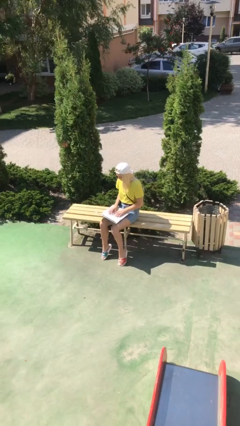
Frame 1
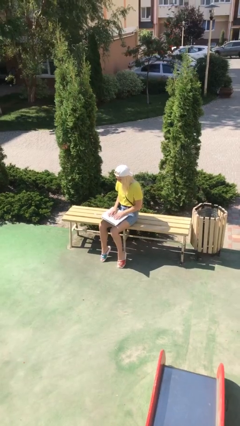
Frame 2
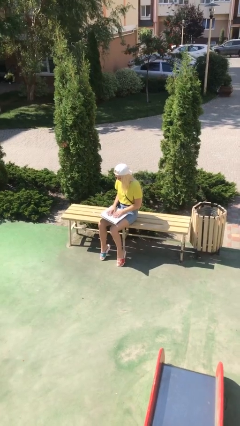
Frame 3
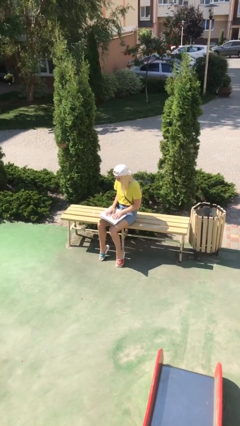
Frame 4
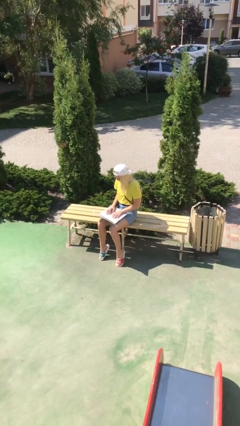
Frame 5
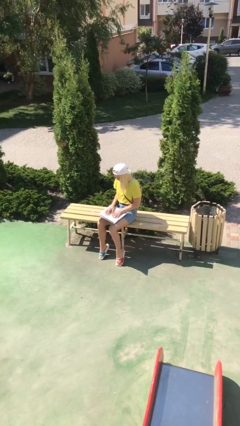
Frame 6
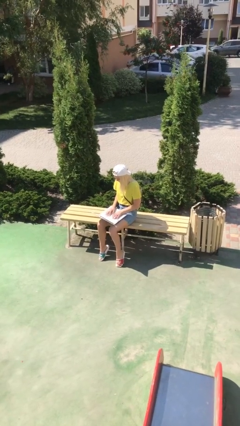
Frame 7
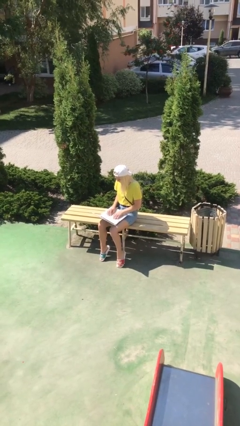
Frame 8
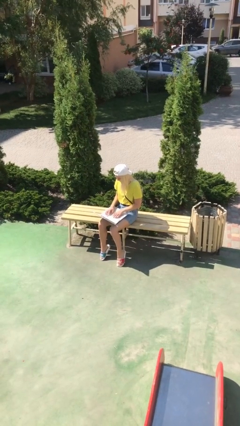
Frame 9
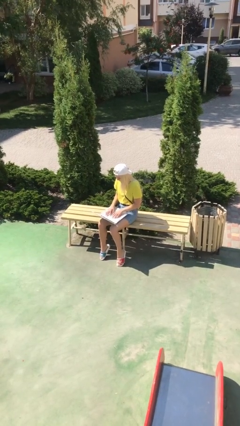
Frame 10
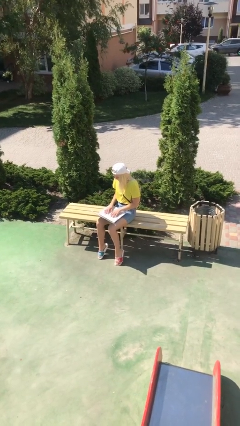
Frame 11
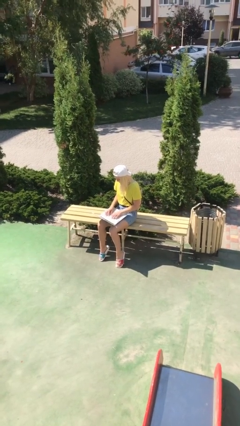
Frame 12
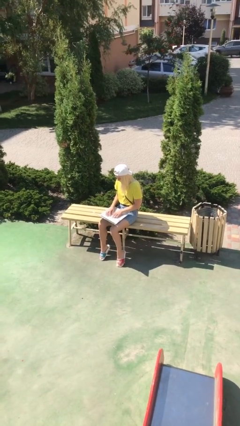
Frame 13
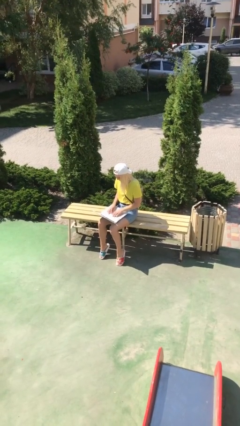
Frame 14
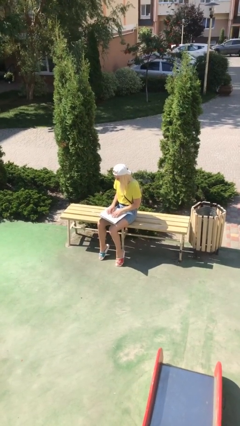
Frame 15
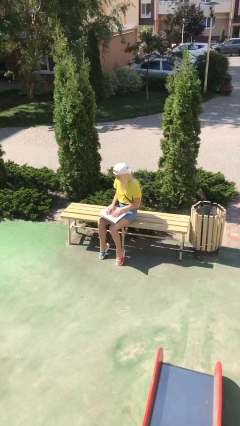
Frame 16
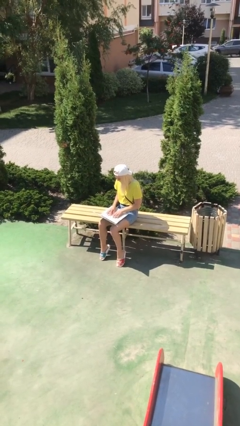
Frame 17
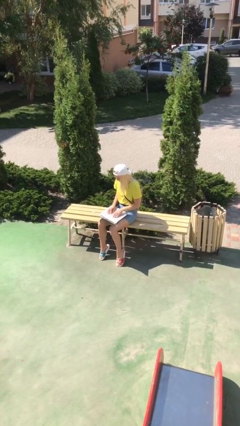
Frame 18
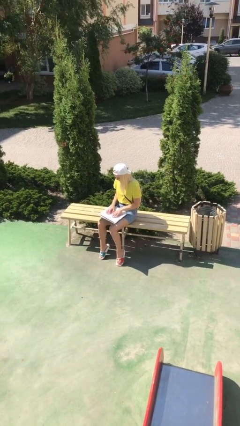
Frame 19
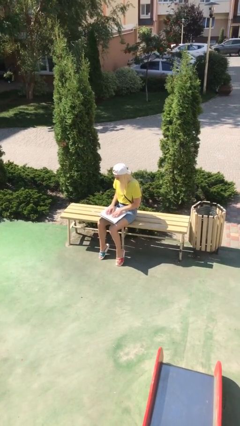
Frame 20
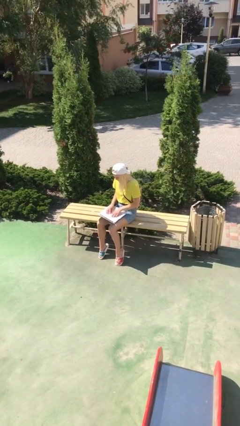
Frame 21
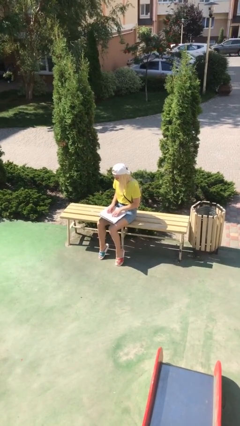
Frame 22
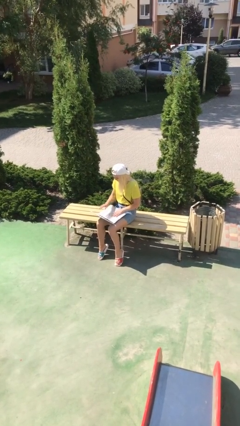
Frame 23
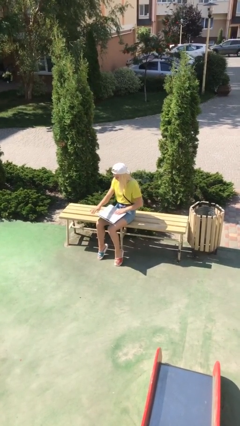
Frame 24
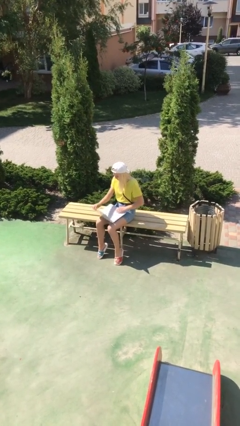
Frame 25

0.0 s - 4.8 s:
person interacts with laptop

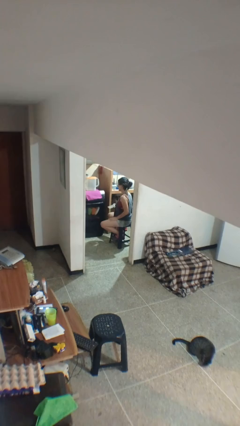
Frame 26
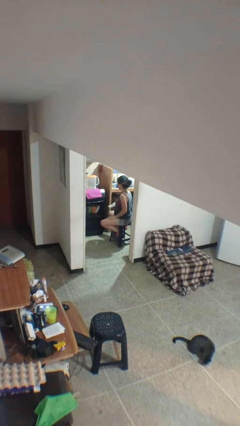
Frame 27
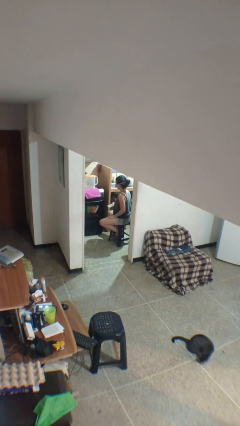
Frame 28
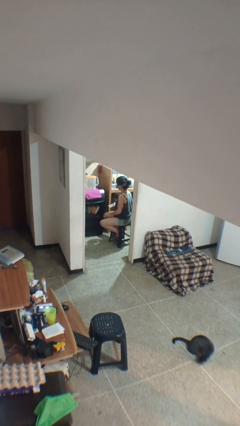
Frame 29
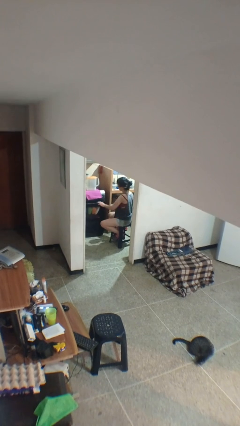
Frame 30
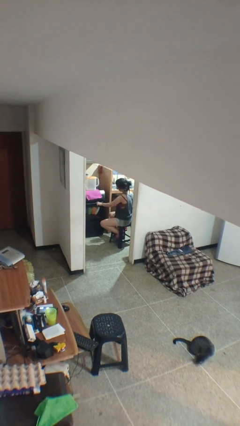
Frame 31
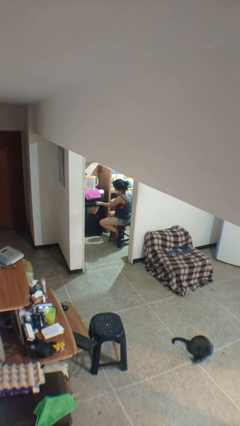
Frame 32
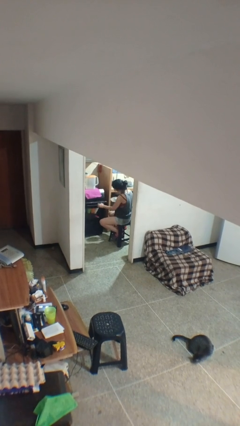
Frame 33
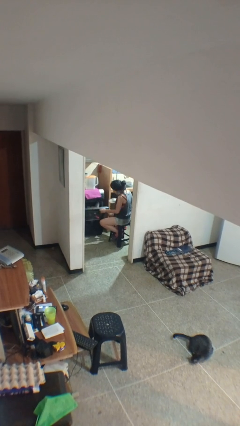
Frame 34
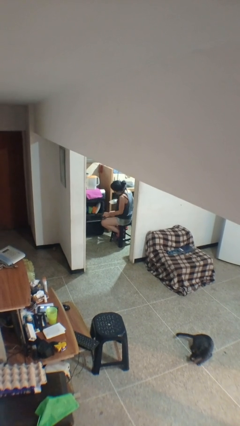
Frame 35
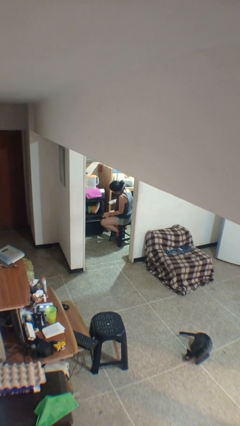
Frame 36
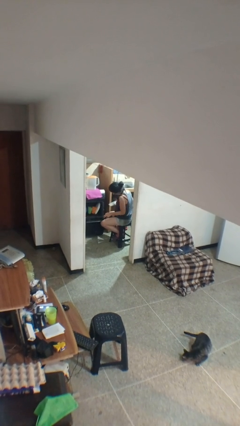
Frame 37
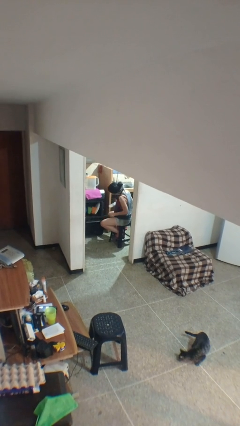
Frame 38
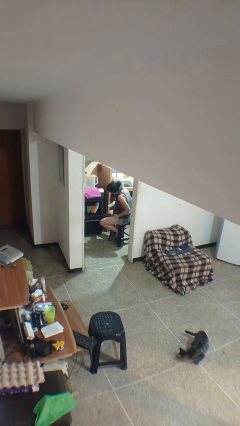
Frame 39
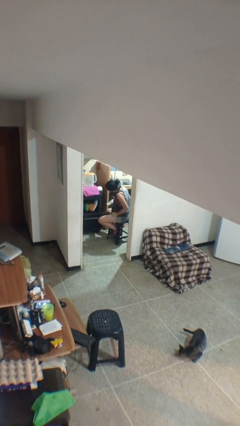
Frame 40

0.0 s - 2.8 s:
person opens dishwasher

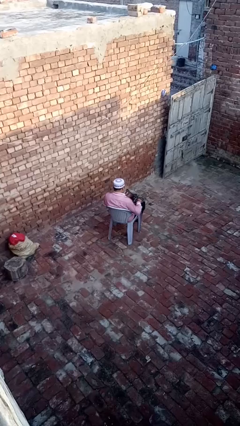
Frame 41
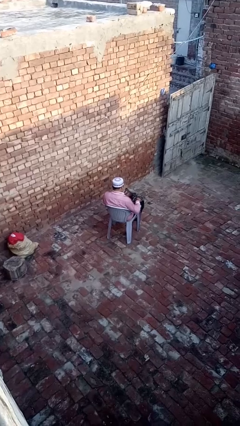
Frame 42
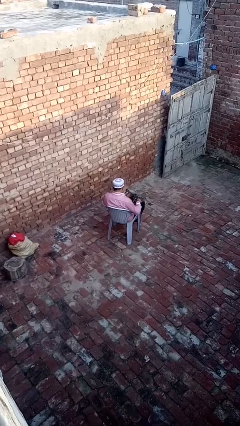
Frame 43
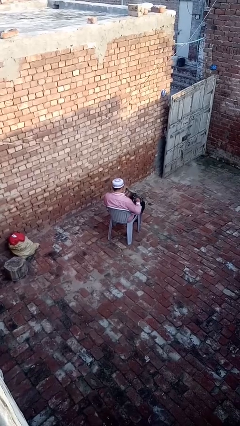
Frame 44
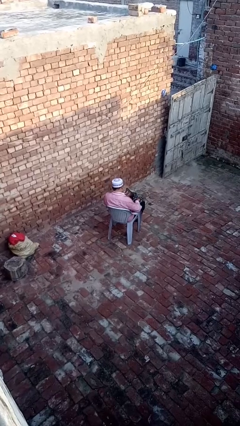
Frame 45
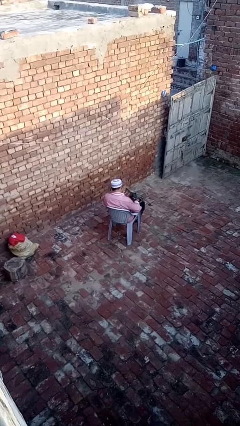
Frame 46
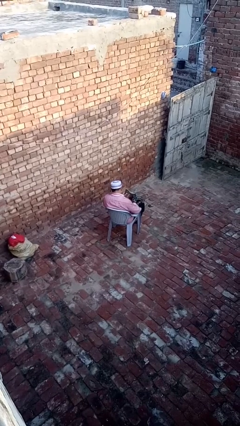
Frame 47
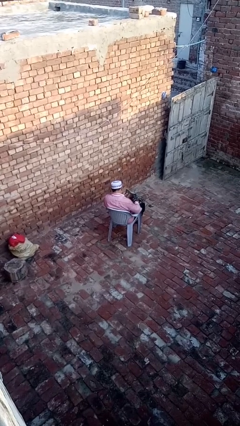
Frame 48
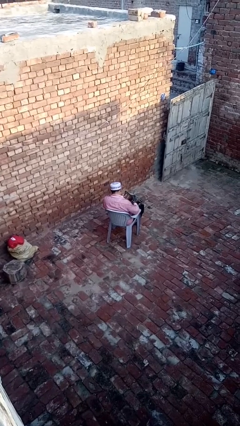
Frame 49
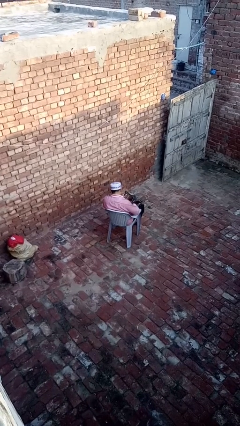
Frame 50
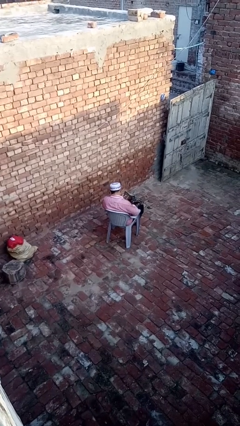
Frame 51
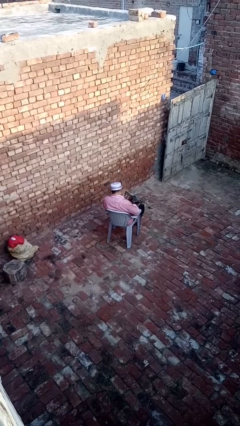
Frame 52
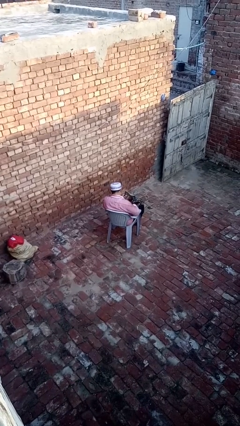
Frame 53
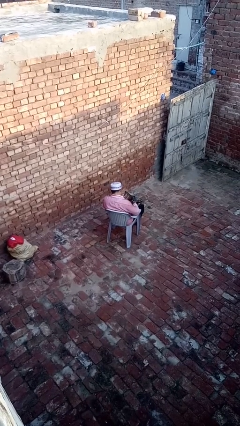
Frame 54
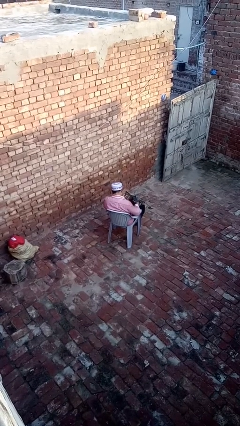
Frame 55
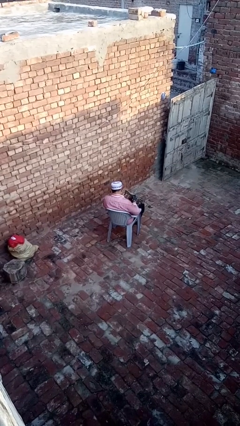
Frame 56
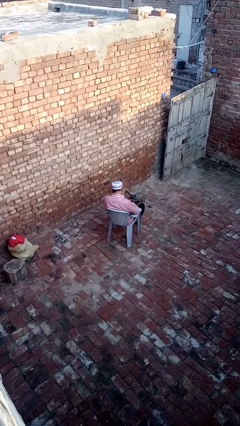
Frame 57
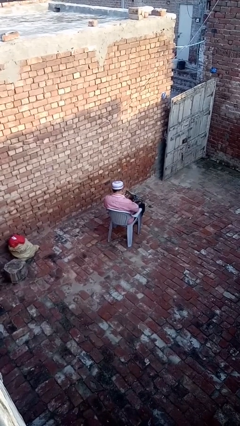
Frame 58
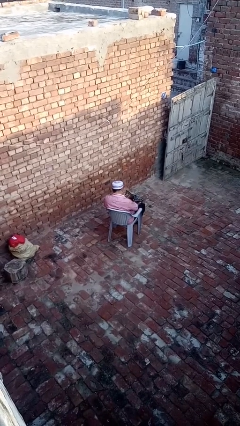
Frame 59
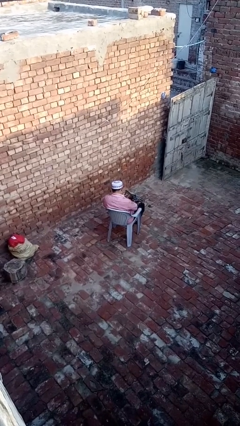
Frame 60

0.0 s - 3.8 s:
person searches in purse

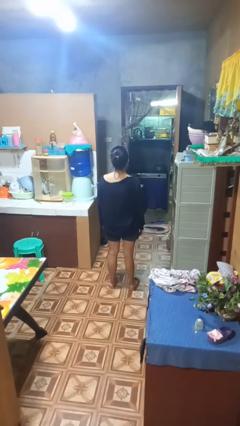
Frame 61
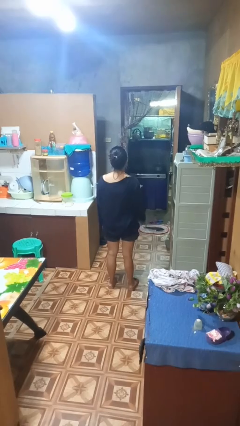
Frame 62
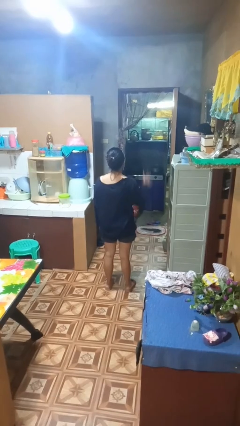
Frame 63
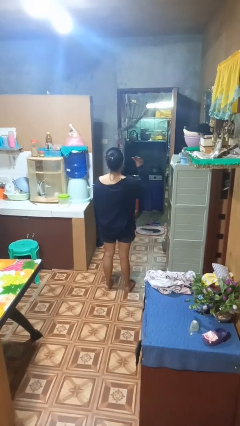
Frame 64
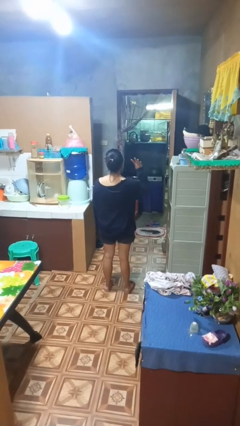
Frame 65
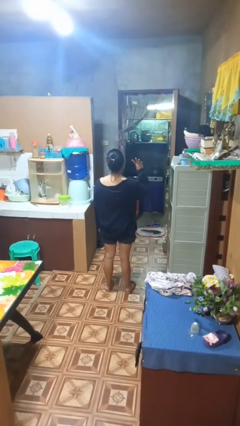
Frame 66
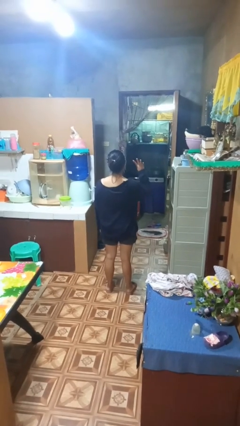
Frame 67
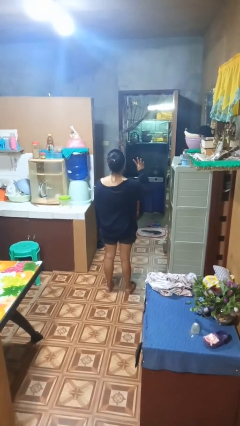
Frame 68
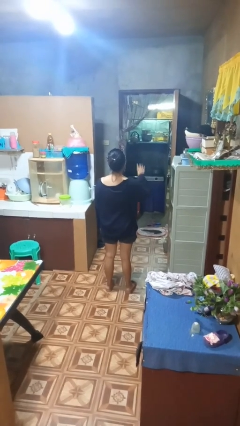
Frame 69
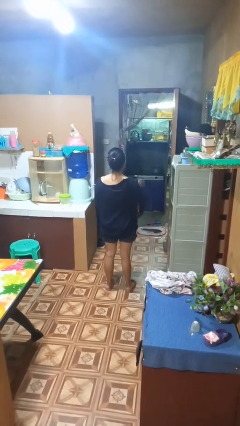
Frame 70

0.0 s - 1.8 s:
person gestures number four

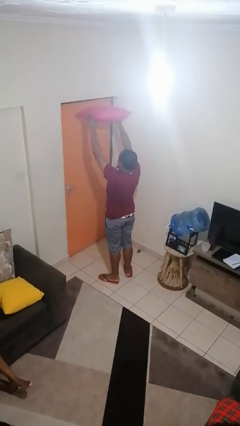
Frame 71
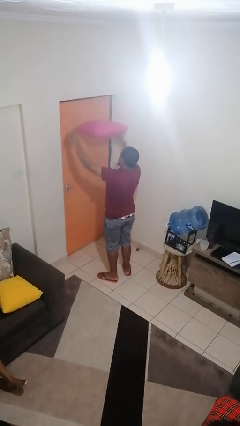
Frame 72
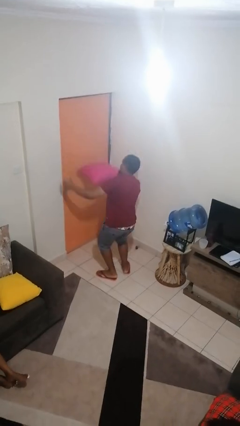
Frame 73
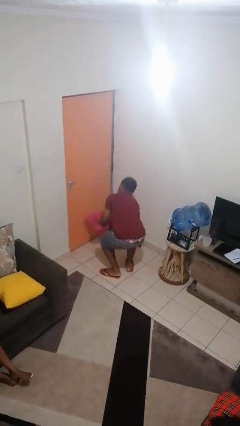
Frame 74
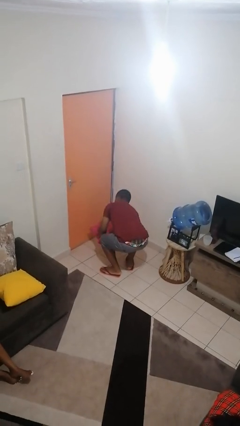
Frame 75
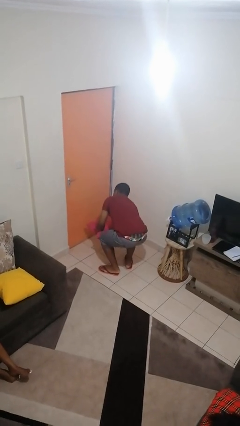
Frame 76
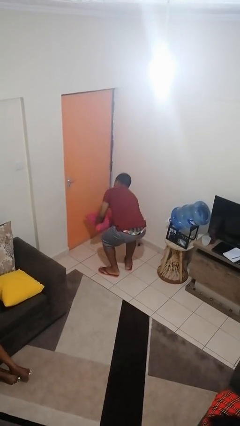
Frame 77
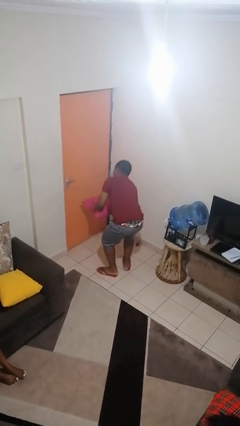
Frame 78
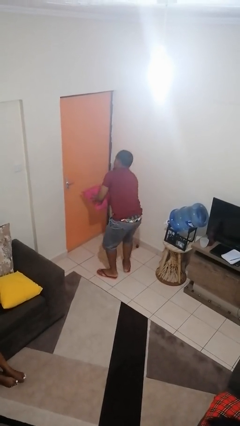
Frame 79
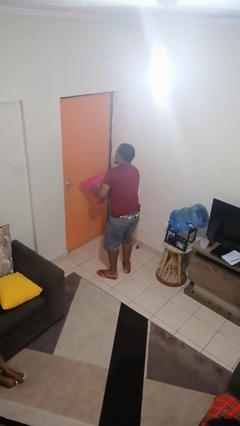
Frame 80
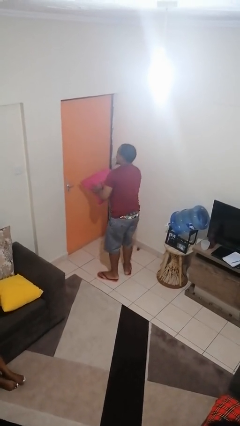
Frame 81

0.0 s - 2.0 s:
person catches dropped object

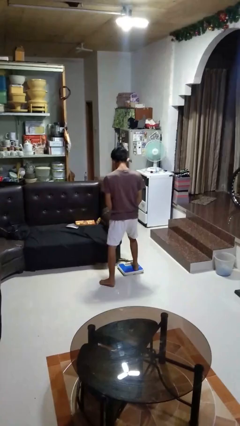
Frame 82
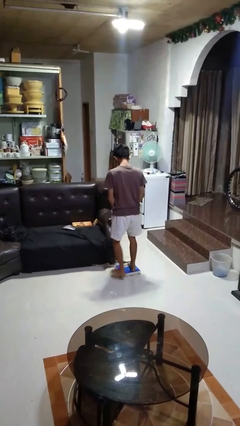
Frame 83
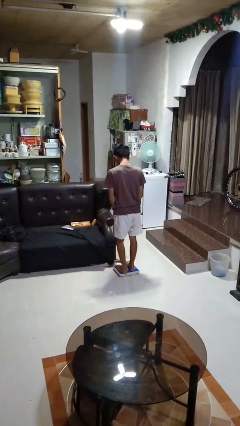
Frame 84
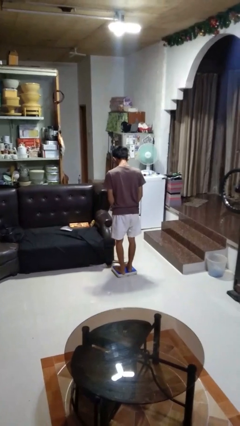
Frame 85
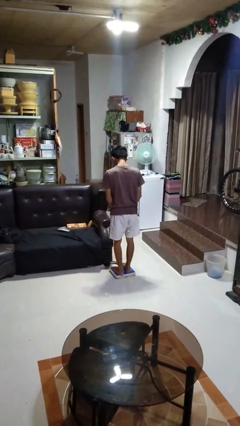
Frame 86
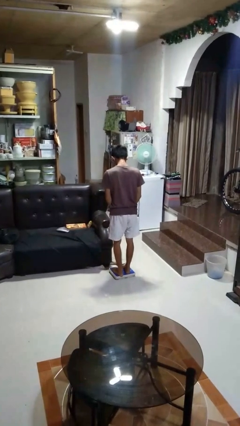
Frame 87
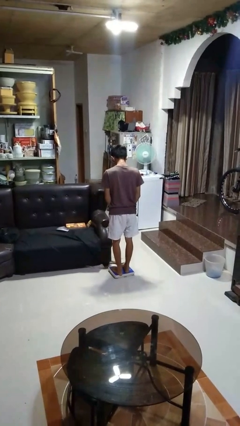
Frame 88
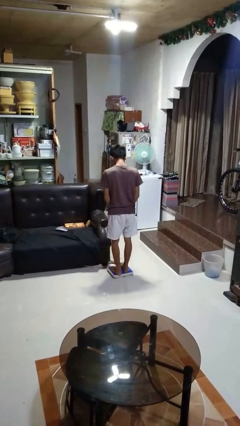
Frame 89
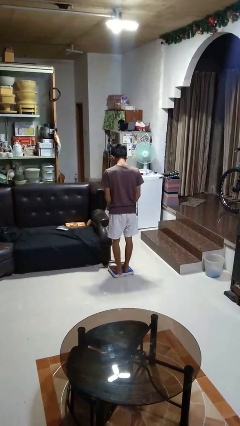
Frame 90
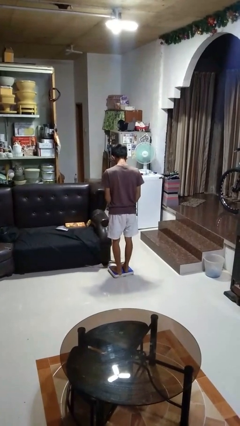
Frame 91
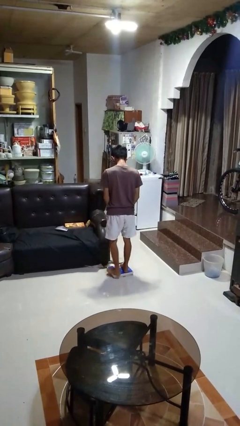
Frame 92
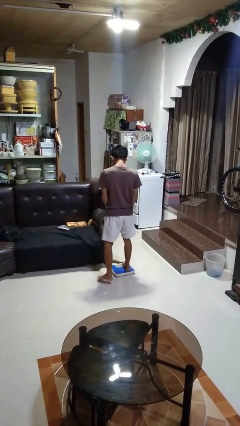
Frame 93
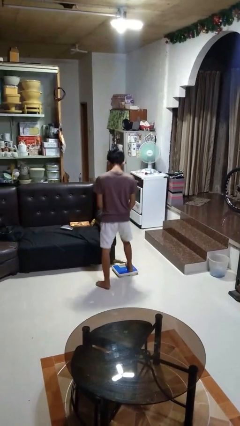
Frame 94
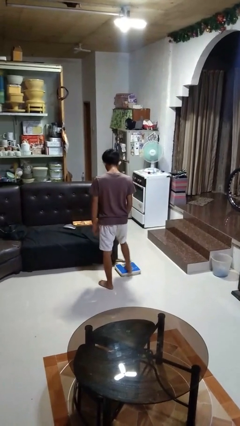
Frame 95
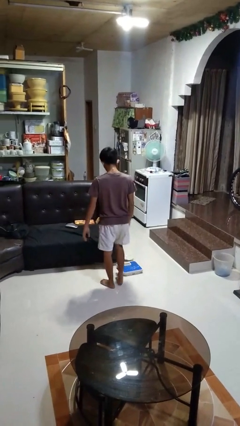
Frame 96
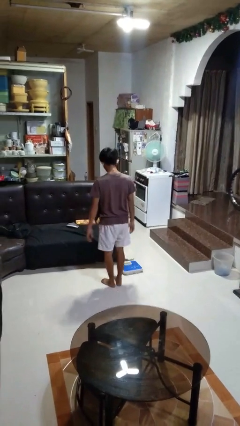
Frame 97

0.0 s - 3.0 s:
person uses bodyweight scale
